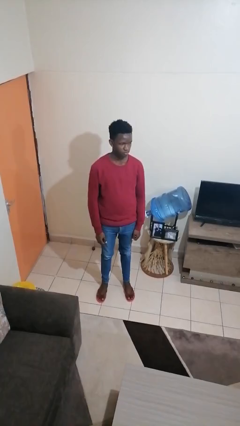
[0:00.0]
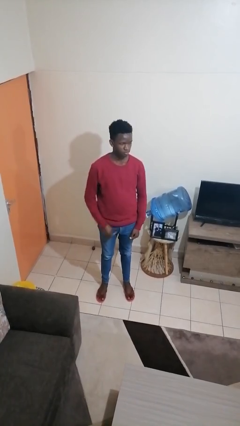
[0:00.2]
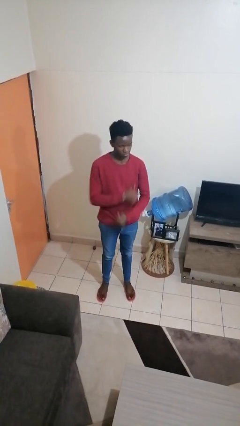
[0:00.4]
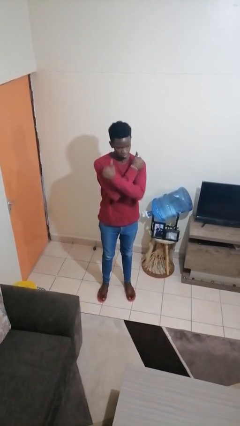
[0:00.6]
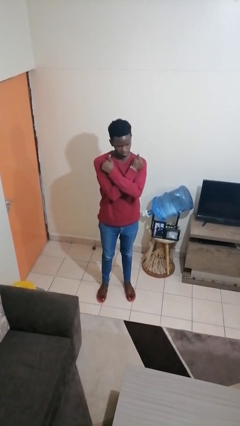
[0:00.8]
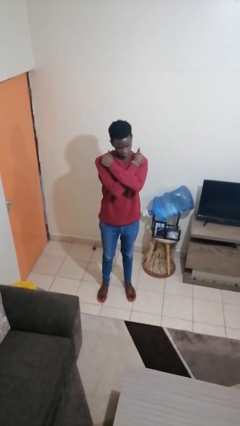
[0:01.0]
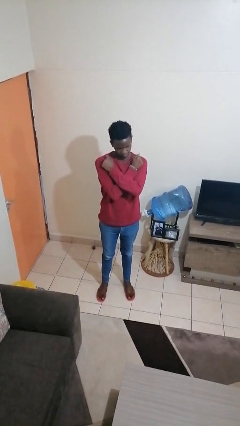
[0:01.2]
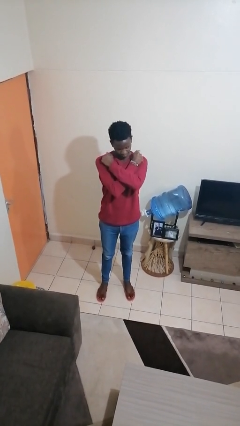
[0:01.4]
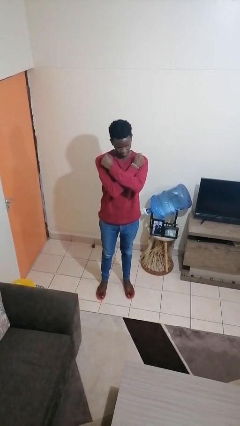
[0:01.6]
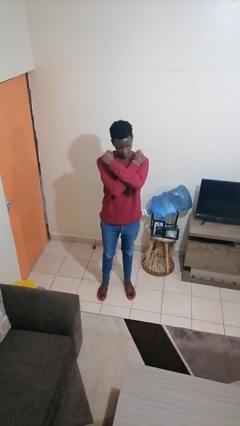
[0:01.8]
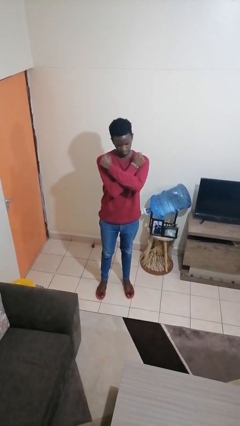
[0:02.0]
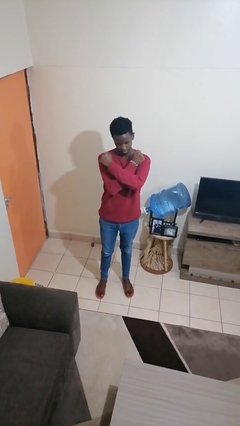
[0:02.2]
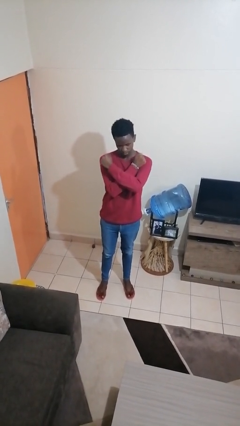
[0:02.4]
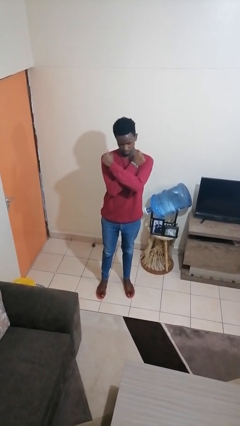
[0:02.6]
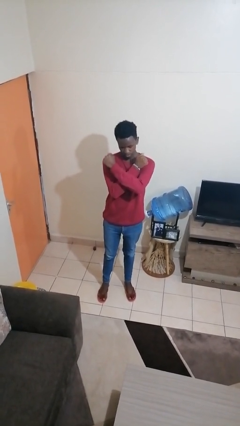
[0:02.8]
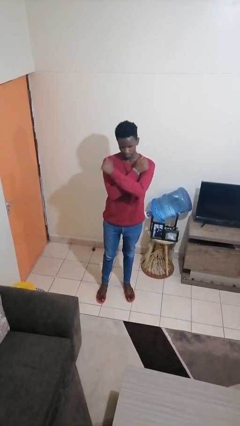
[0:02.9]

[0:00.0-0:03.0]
person gestures arms x

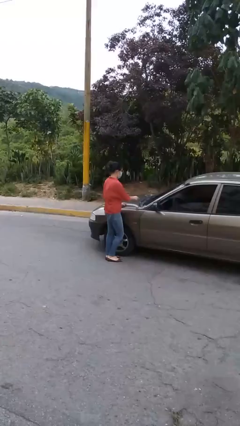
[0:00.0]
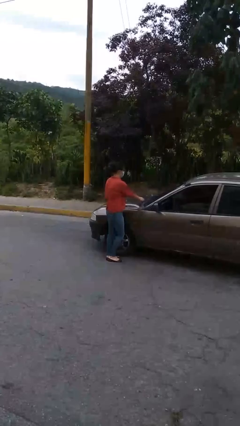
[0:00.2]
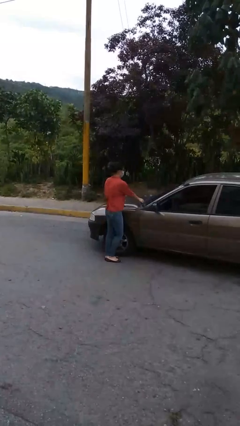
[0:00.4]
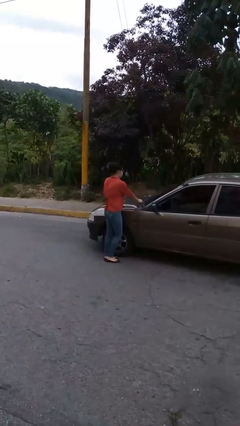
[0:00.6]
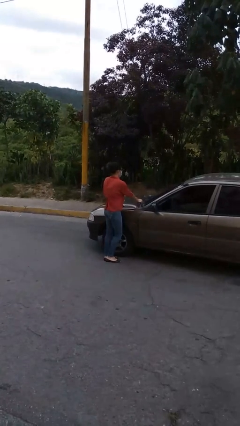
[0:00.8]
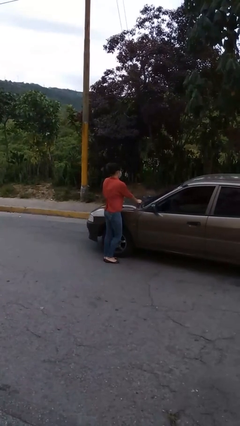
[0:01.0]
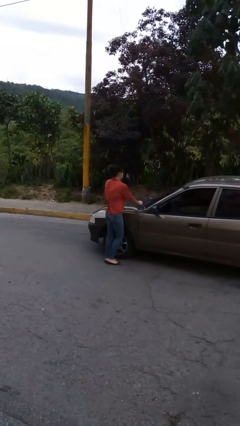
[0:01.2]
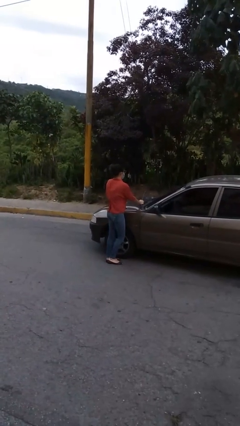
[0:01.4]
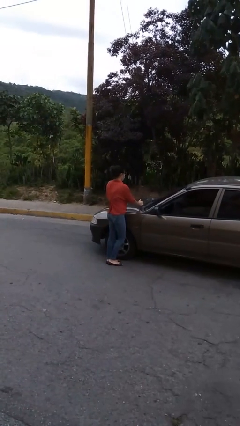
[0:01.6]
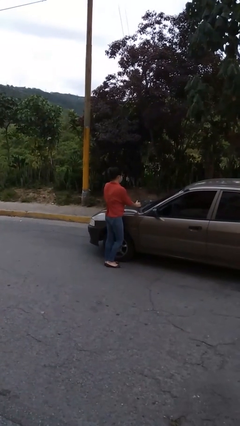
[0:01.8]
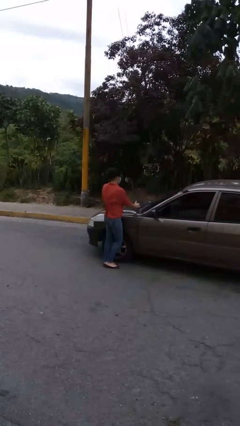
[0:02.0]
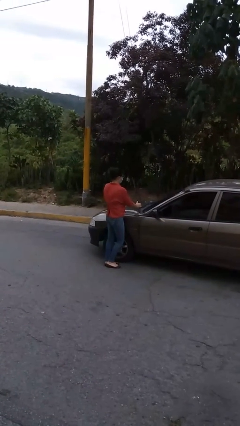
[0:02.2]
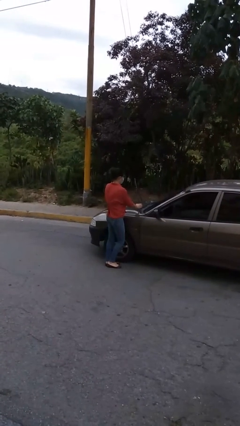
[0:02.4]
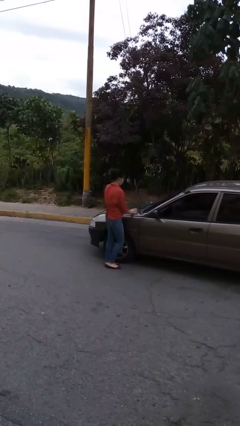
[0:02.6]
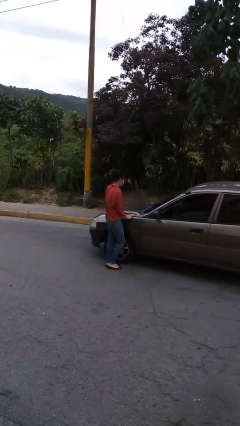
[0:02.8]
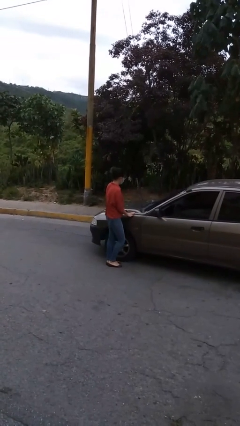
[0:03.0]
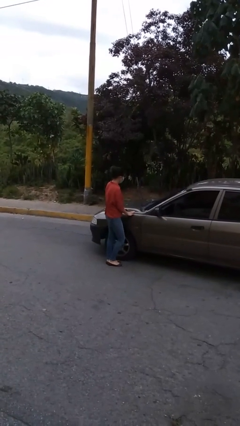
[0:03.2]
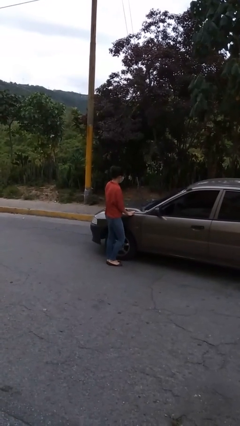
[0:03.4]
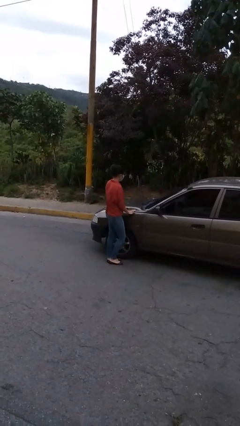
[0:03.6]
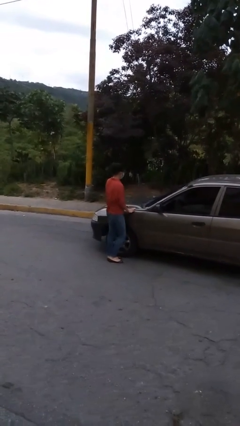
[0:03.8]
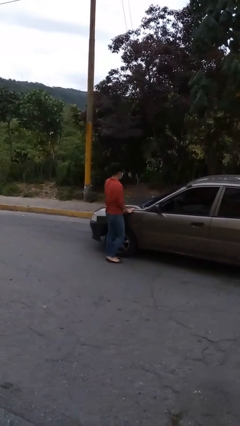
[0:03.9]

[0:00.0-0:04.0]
person flips up car wipers

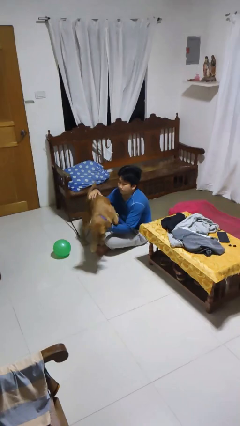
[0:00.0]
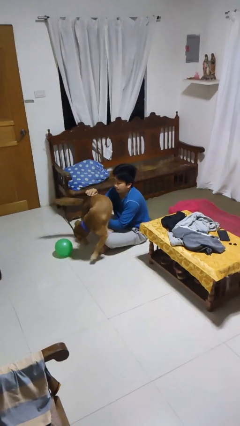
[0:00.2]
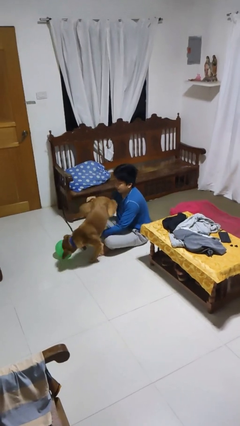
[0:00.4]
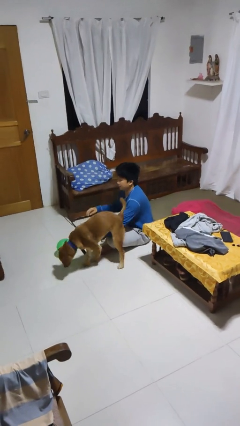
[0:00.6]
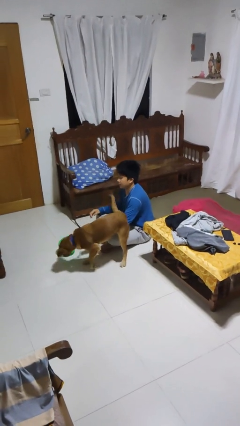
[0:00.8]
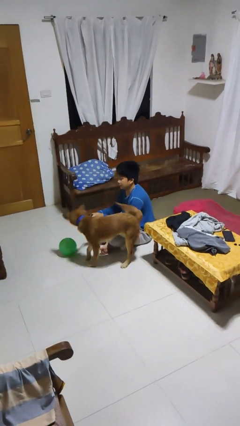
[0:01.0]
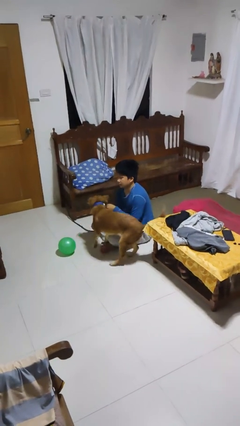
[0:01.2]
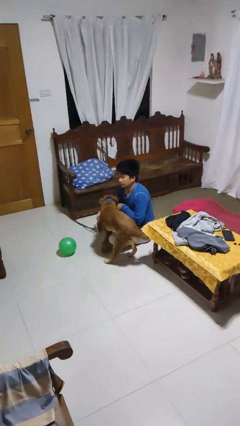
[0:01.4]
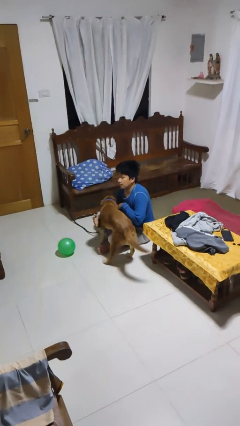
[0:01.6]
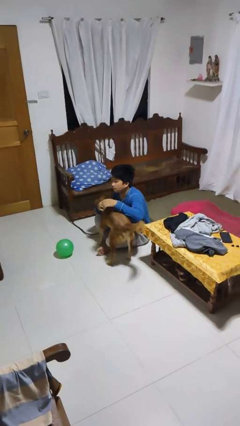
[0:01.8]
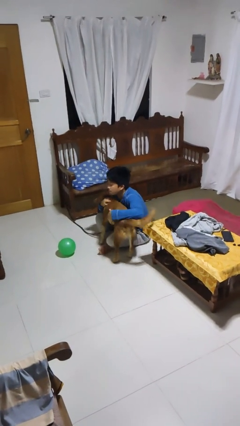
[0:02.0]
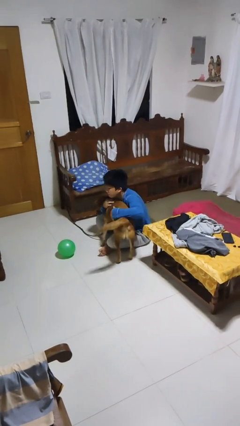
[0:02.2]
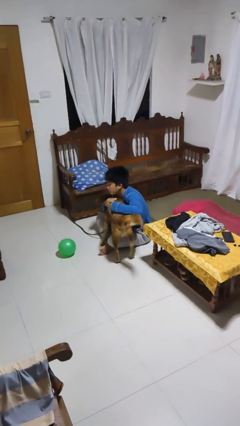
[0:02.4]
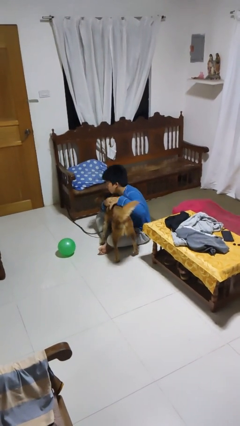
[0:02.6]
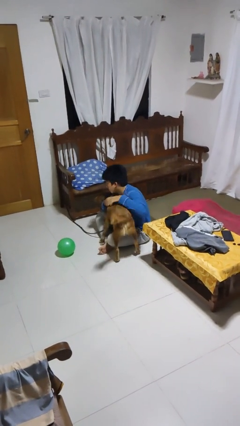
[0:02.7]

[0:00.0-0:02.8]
person hugs dog

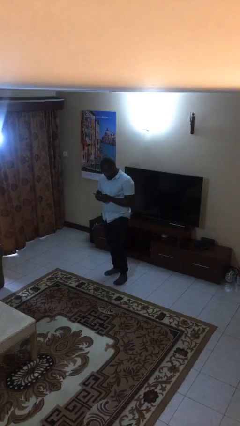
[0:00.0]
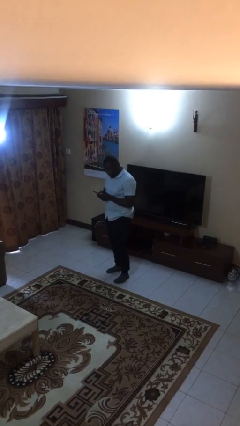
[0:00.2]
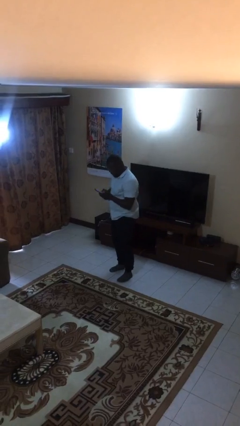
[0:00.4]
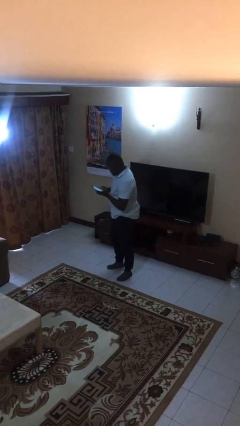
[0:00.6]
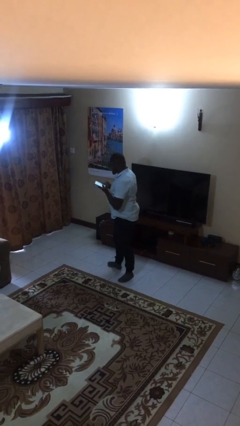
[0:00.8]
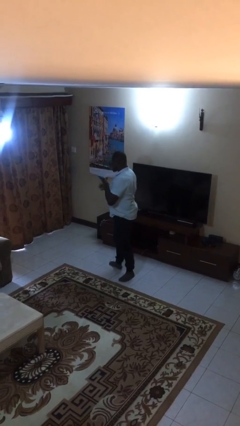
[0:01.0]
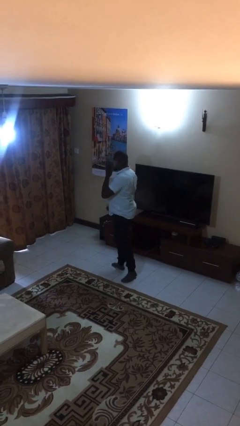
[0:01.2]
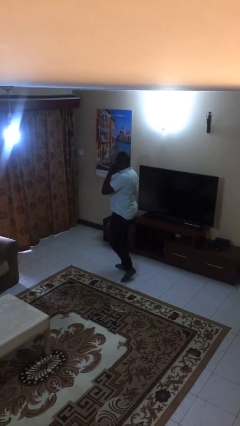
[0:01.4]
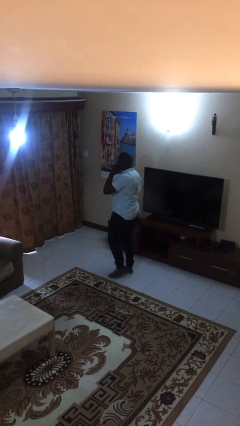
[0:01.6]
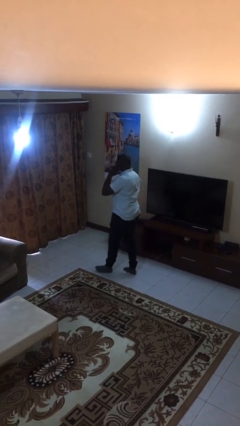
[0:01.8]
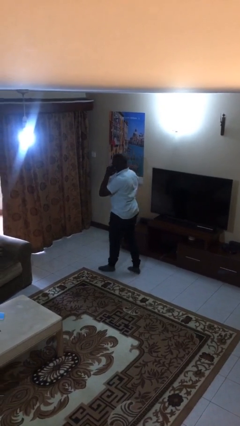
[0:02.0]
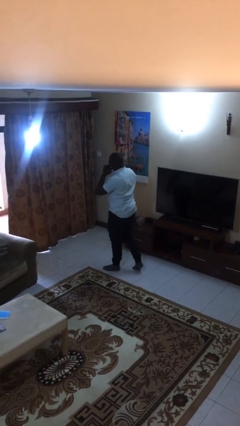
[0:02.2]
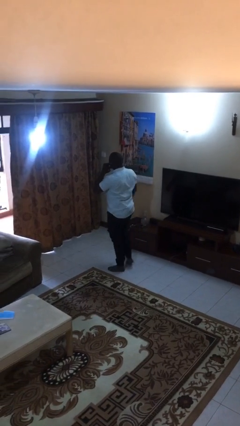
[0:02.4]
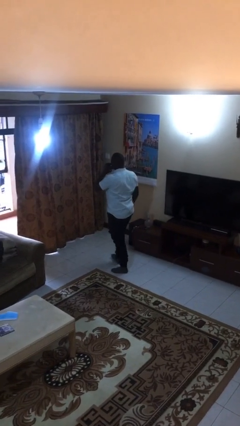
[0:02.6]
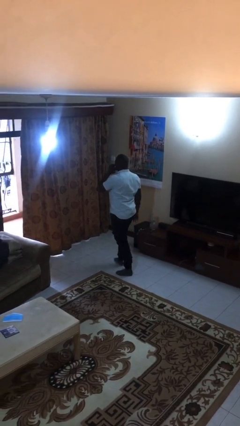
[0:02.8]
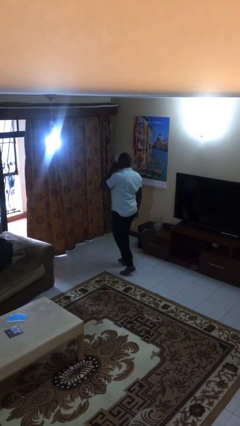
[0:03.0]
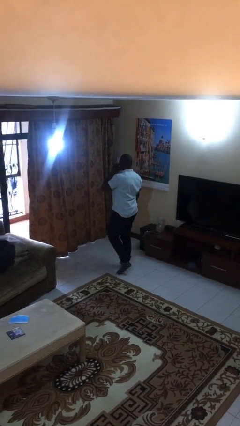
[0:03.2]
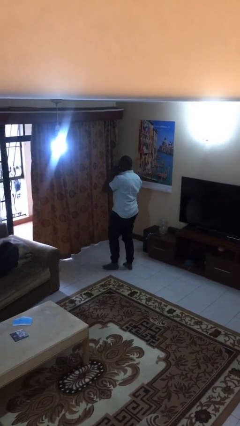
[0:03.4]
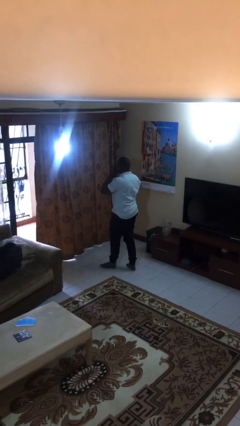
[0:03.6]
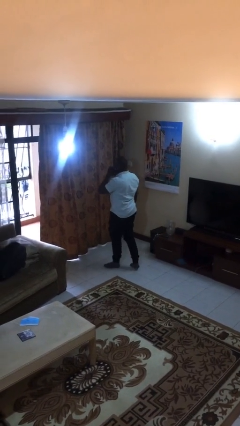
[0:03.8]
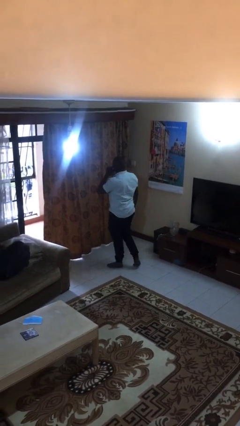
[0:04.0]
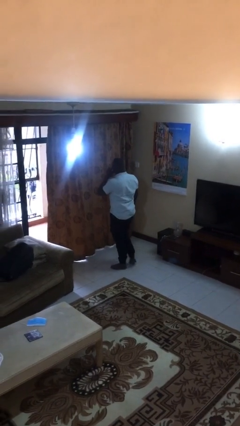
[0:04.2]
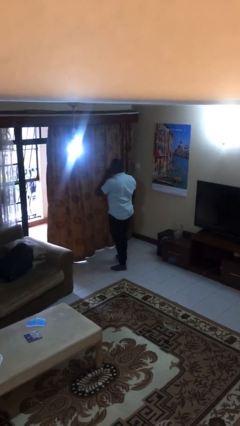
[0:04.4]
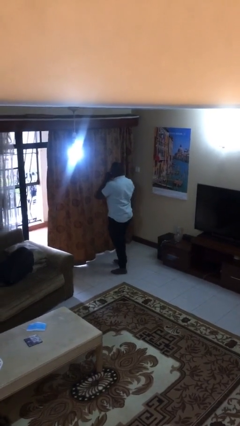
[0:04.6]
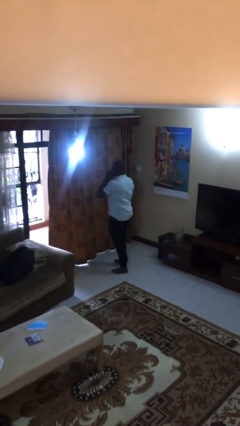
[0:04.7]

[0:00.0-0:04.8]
person talks on phone

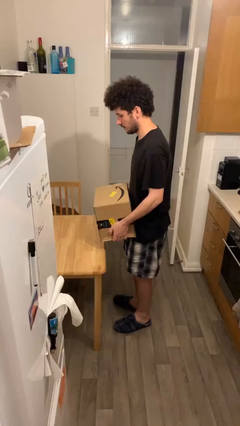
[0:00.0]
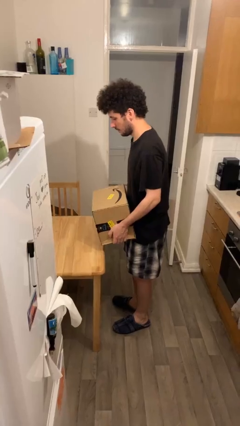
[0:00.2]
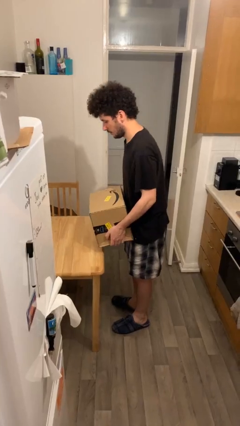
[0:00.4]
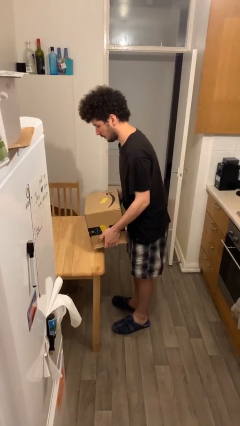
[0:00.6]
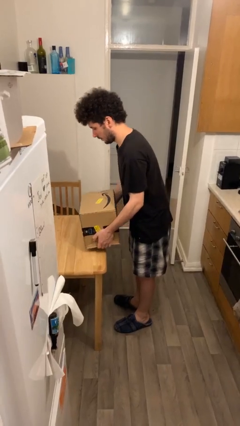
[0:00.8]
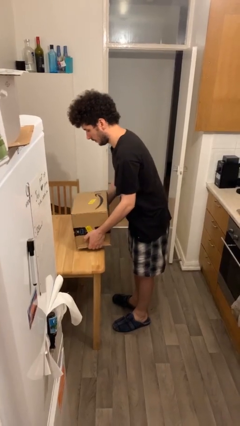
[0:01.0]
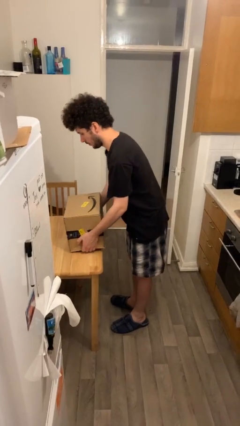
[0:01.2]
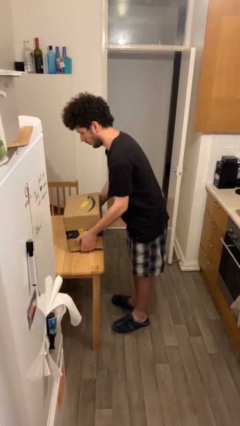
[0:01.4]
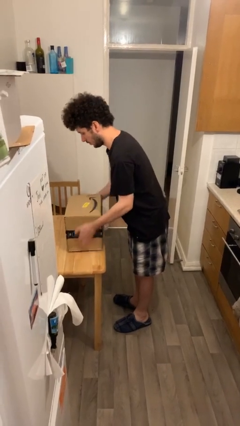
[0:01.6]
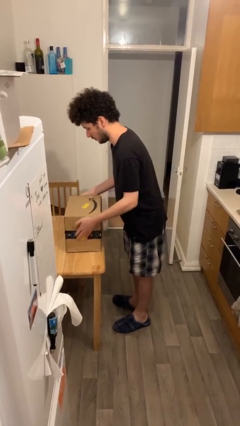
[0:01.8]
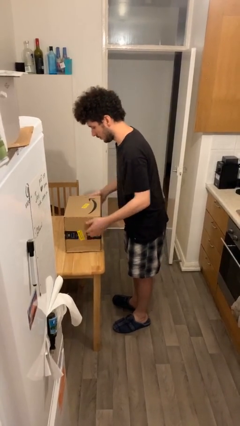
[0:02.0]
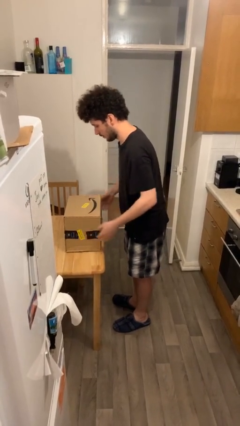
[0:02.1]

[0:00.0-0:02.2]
person puts down object on table

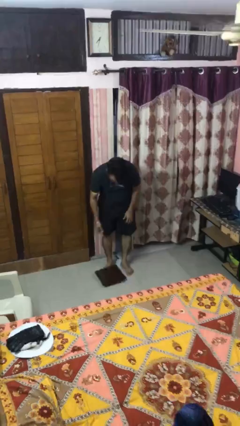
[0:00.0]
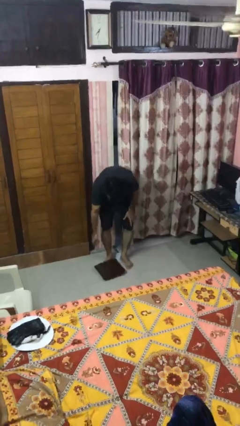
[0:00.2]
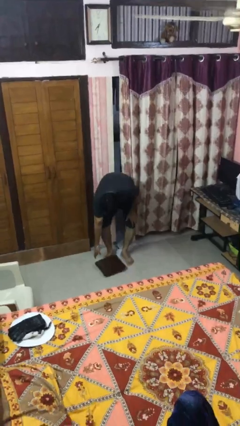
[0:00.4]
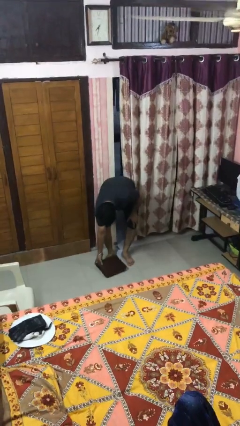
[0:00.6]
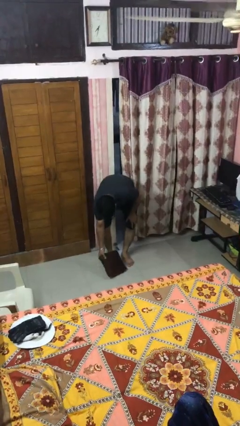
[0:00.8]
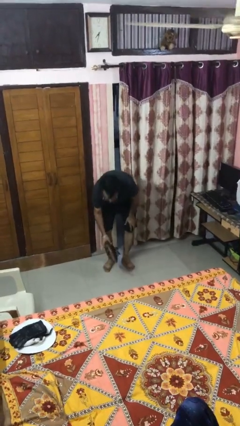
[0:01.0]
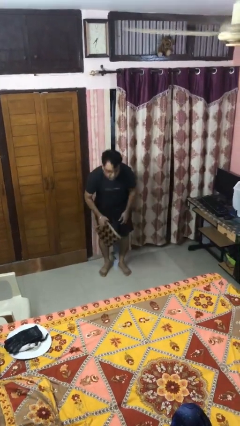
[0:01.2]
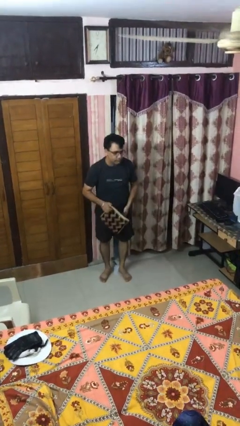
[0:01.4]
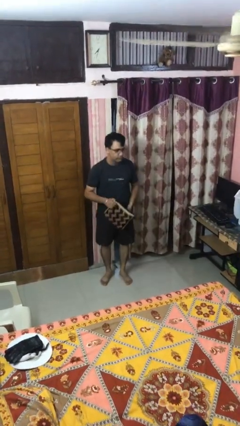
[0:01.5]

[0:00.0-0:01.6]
person picks up object from floor
